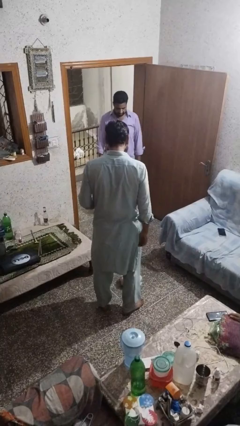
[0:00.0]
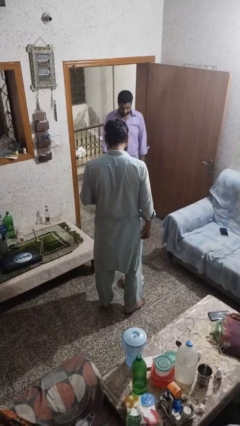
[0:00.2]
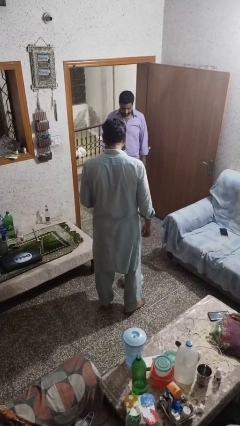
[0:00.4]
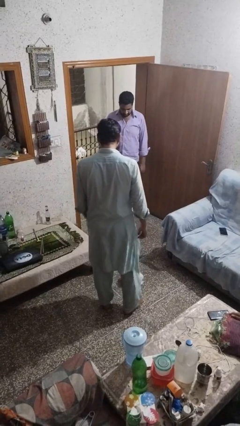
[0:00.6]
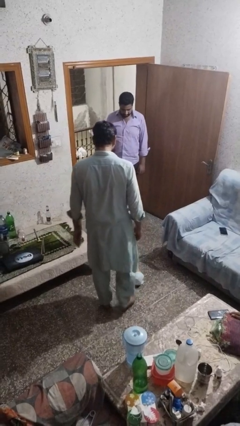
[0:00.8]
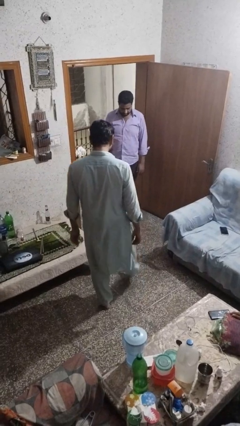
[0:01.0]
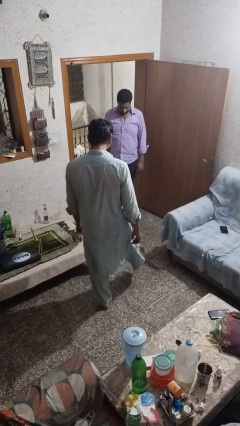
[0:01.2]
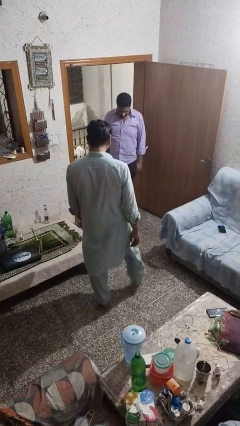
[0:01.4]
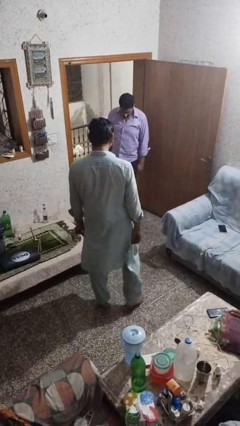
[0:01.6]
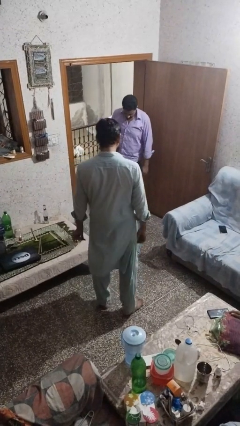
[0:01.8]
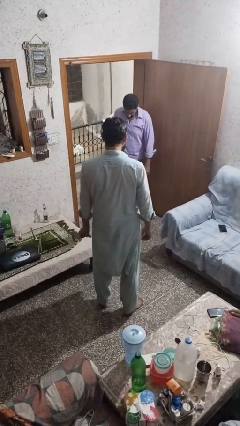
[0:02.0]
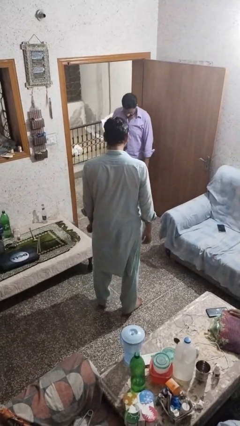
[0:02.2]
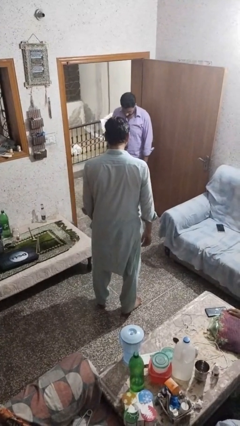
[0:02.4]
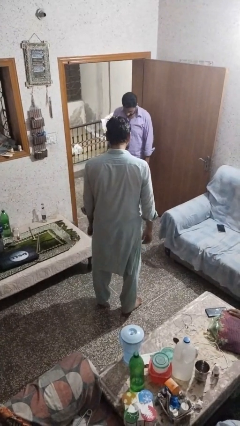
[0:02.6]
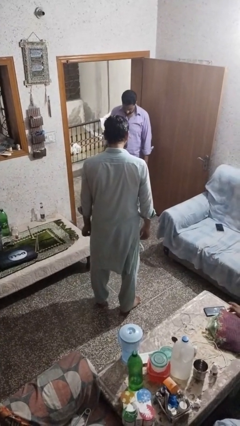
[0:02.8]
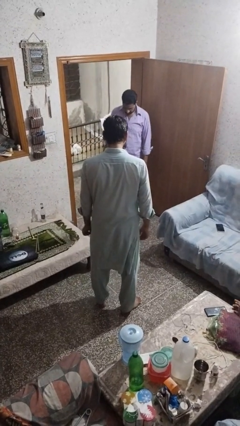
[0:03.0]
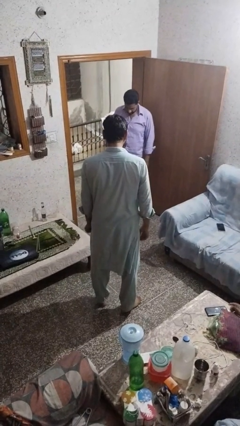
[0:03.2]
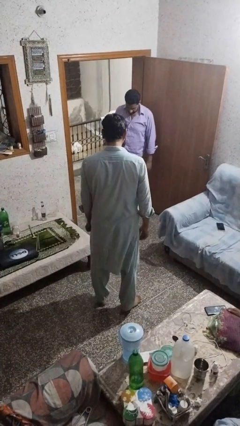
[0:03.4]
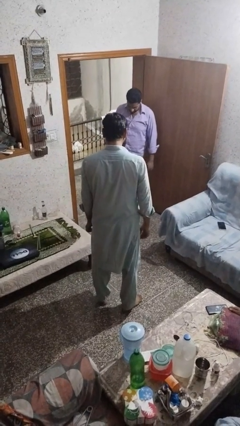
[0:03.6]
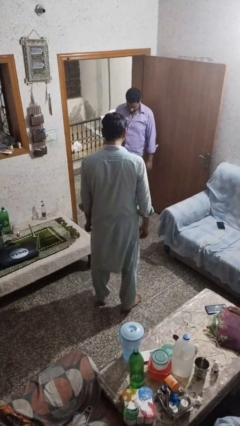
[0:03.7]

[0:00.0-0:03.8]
person kicks object to person

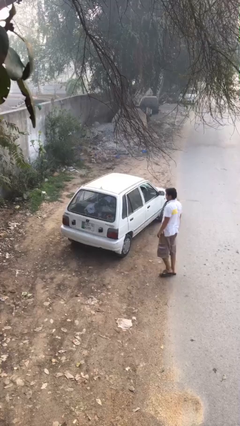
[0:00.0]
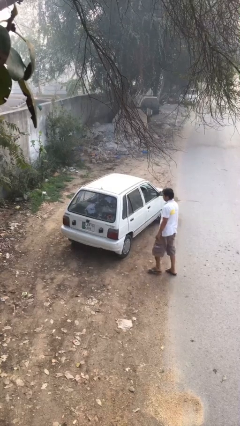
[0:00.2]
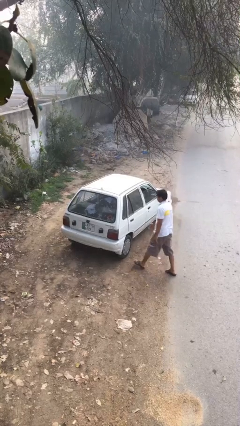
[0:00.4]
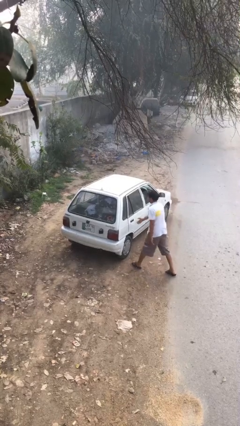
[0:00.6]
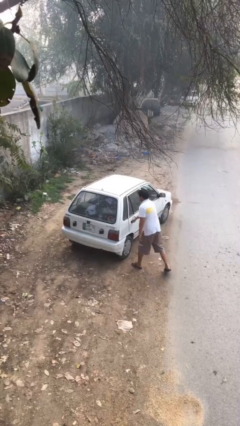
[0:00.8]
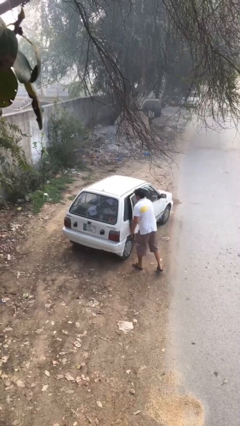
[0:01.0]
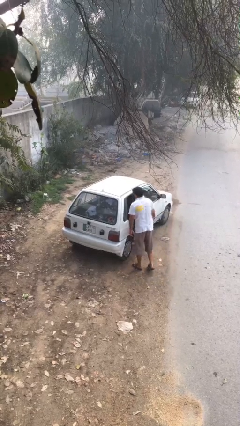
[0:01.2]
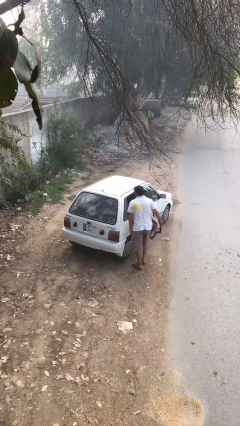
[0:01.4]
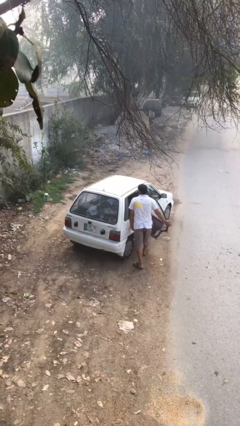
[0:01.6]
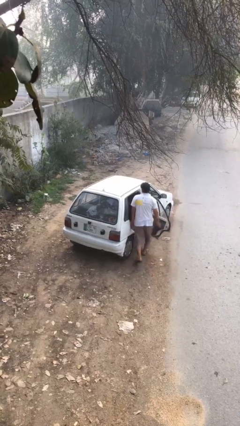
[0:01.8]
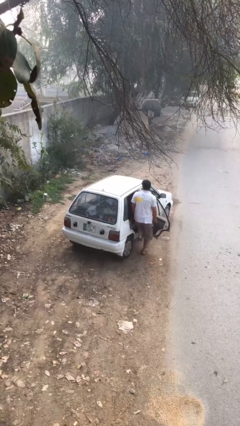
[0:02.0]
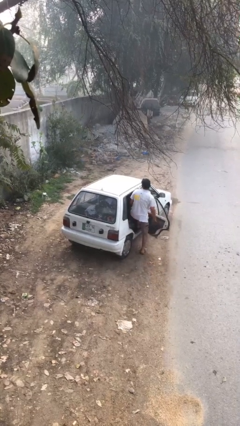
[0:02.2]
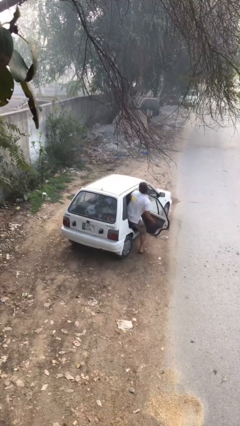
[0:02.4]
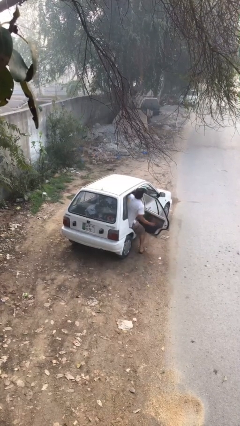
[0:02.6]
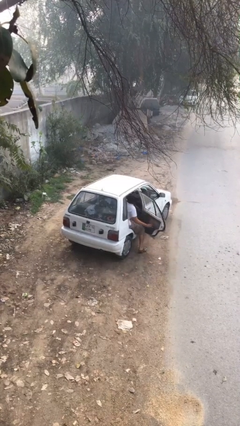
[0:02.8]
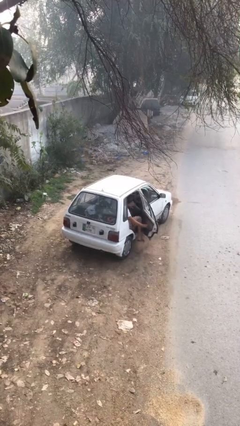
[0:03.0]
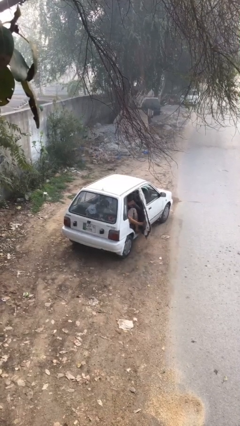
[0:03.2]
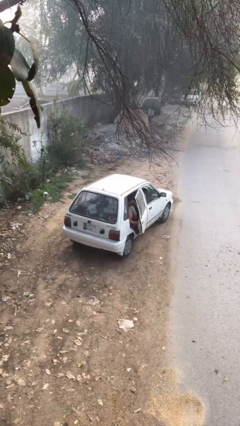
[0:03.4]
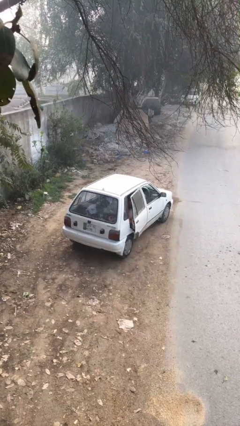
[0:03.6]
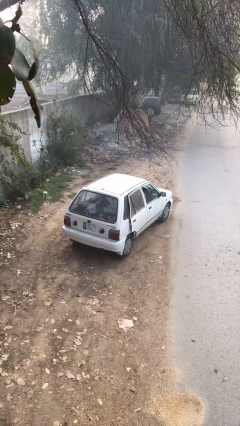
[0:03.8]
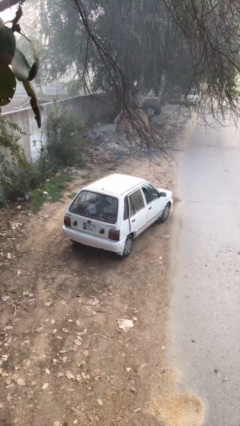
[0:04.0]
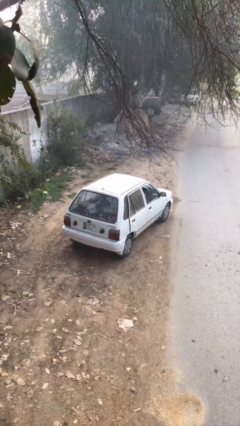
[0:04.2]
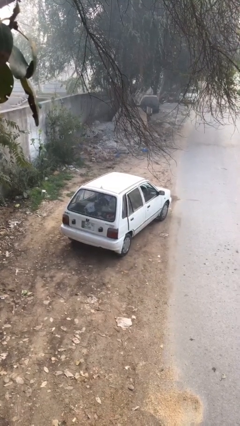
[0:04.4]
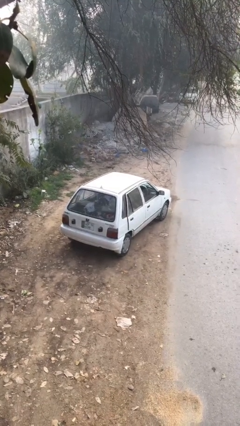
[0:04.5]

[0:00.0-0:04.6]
car picks up person

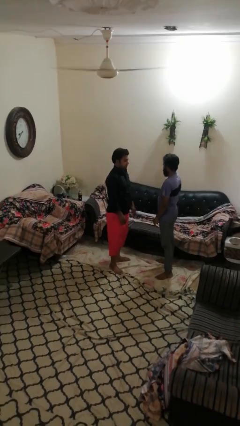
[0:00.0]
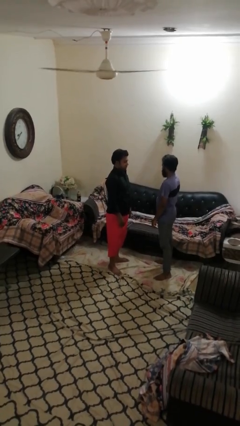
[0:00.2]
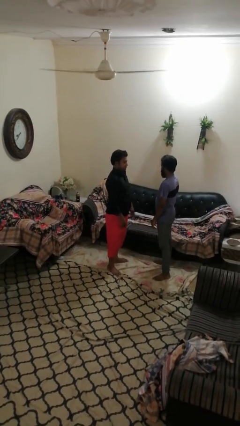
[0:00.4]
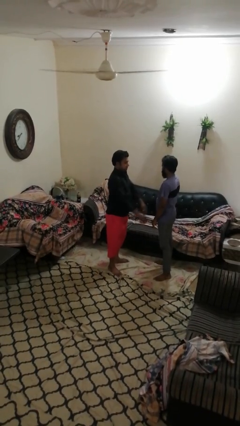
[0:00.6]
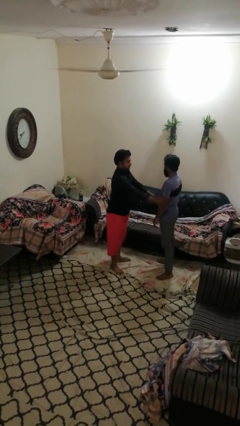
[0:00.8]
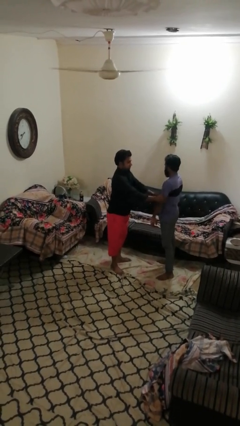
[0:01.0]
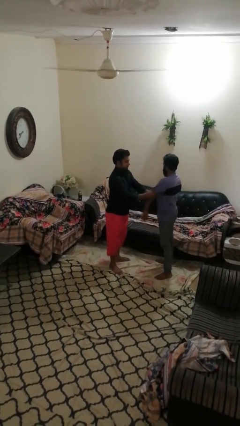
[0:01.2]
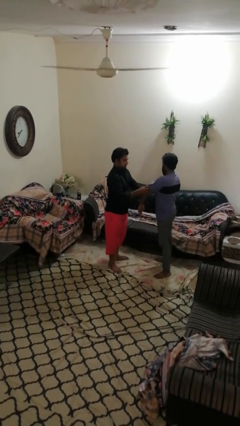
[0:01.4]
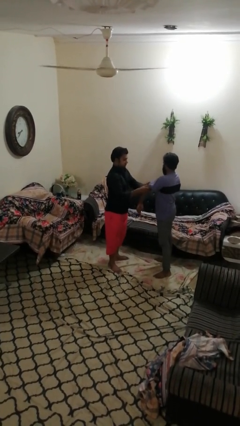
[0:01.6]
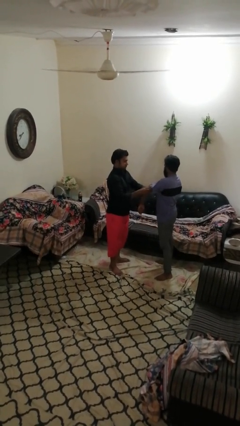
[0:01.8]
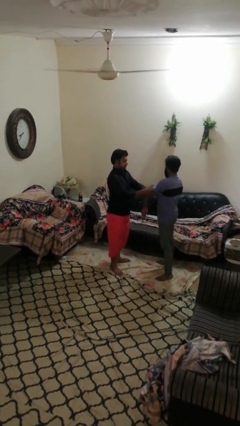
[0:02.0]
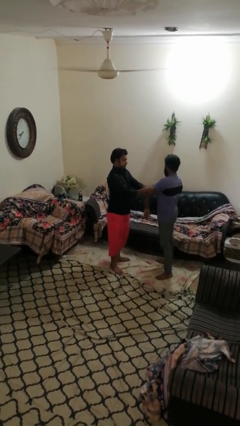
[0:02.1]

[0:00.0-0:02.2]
person grabs person by bicep

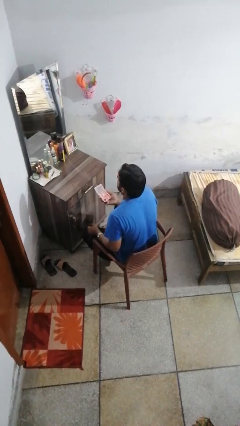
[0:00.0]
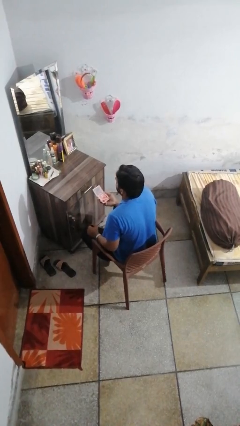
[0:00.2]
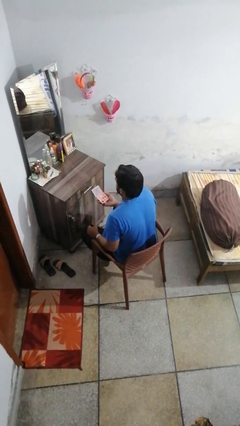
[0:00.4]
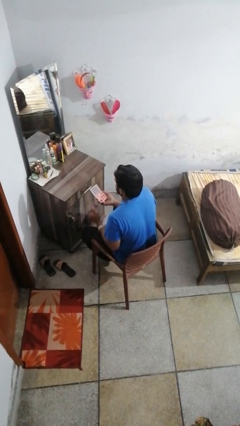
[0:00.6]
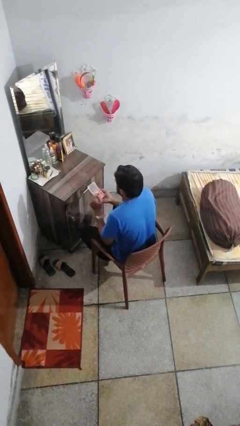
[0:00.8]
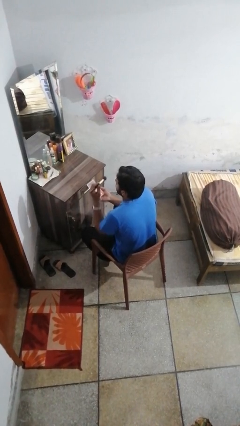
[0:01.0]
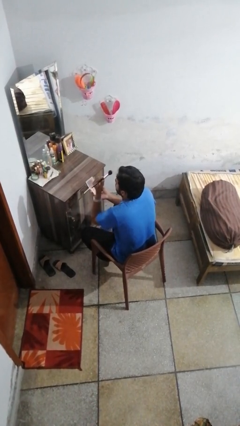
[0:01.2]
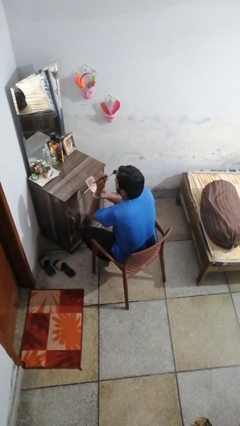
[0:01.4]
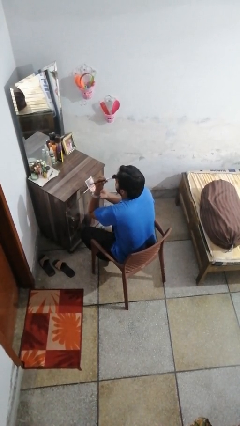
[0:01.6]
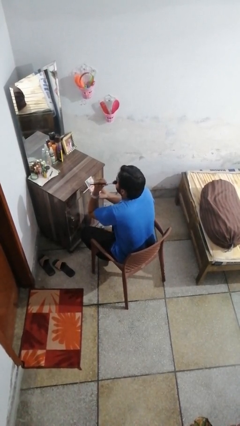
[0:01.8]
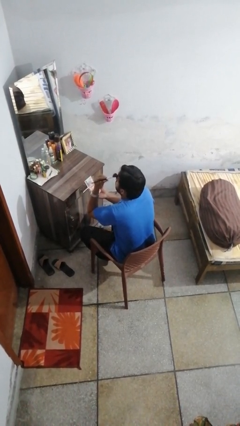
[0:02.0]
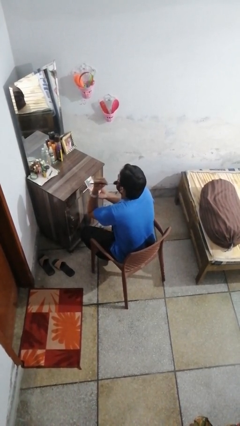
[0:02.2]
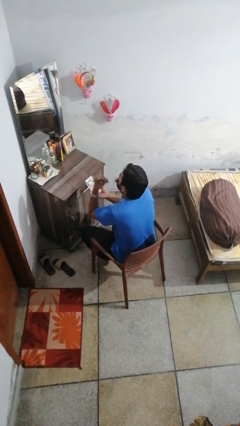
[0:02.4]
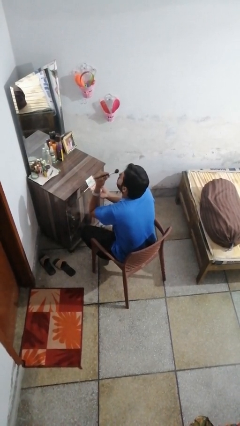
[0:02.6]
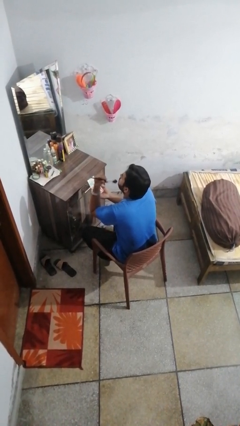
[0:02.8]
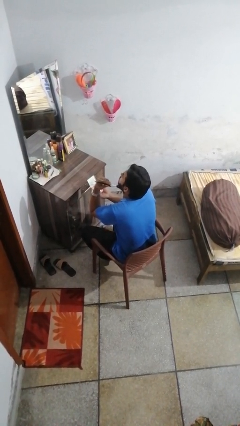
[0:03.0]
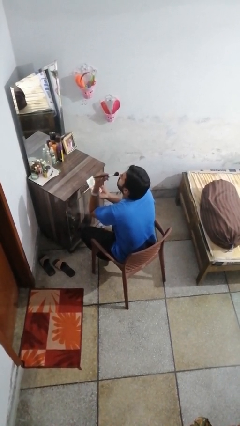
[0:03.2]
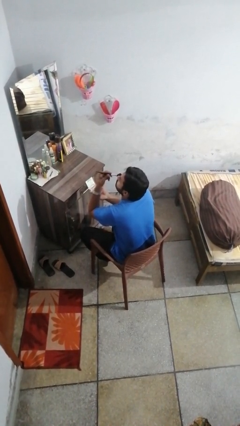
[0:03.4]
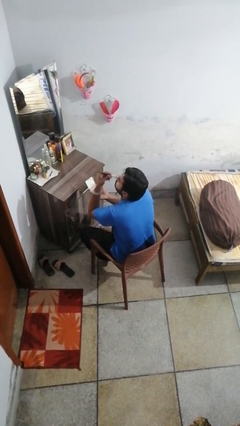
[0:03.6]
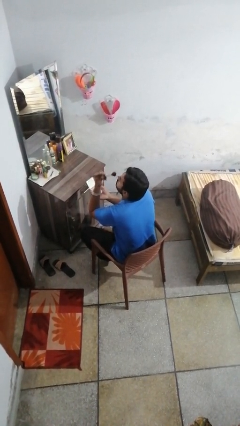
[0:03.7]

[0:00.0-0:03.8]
person applies foundation makeup

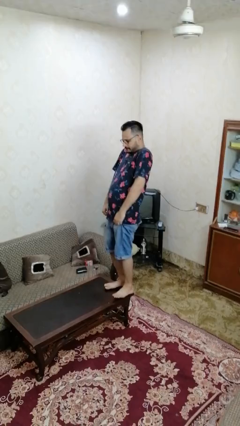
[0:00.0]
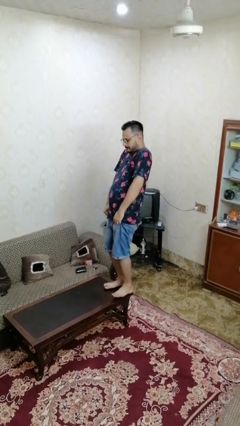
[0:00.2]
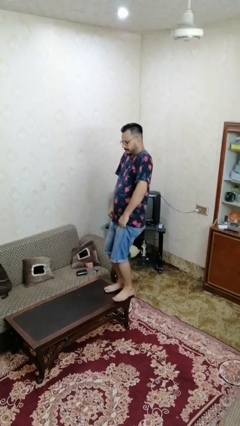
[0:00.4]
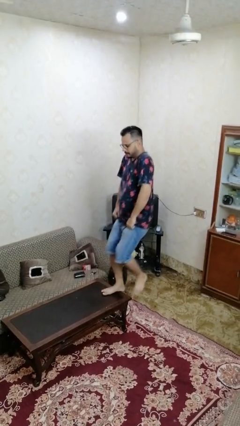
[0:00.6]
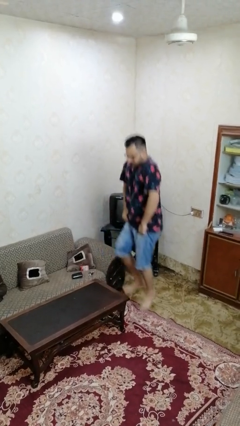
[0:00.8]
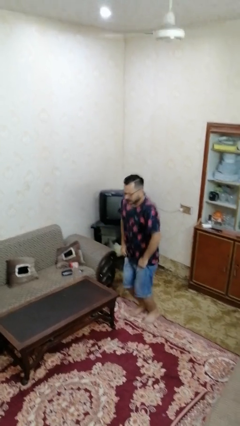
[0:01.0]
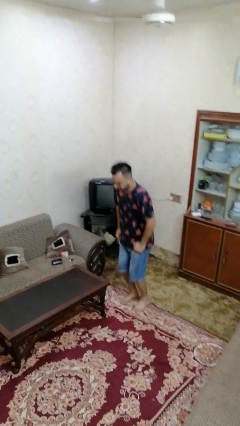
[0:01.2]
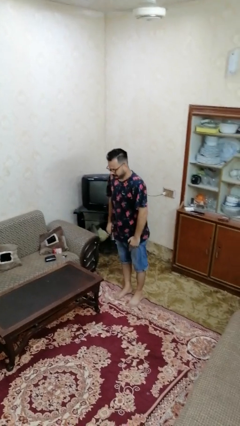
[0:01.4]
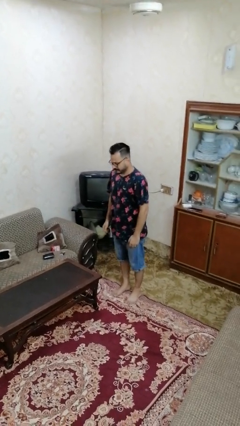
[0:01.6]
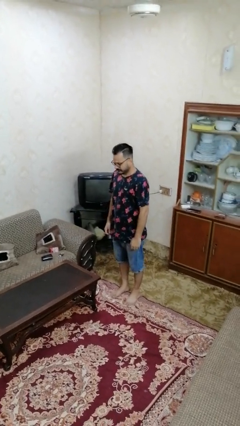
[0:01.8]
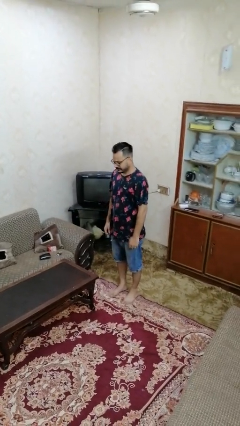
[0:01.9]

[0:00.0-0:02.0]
person climbs off table

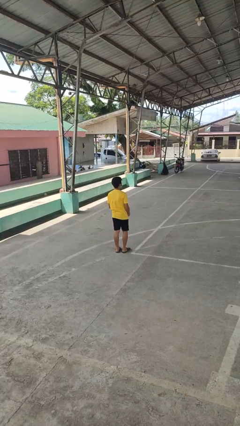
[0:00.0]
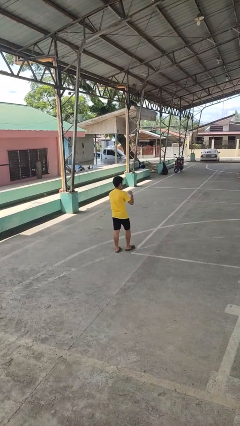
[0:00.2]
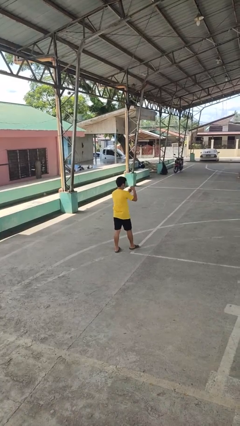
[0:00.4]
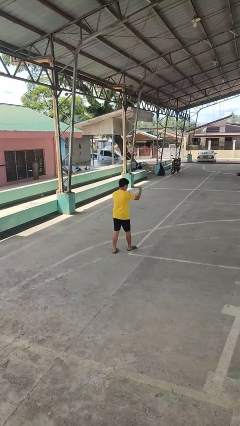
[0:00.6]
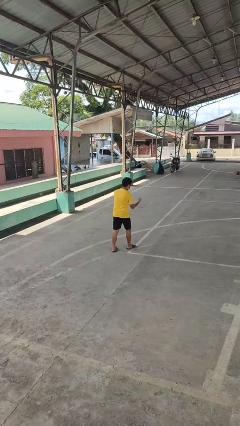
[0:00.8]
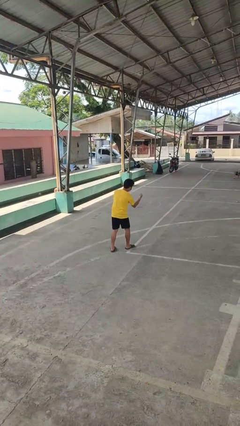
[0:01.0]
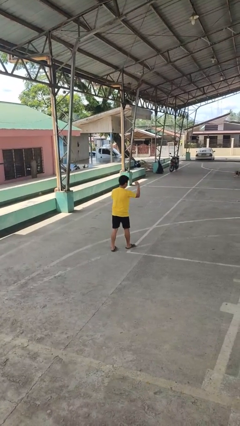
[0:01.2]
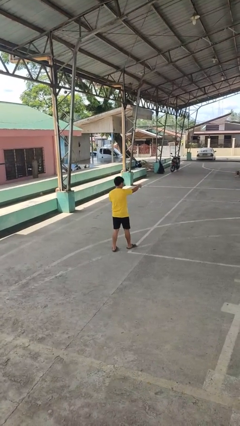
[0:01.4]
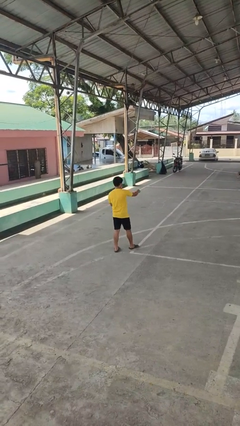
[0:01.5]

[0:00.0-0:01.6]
person punches
